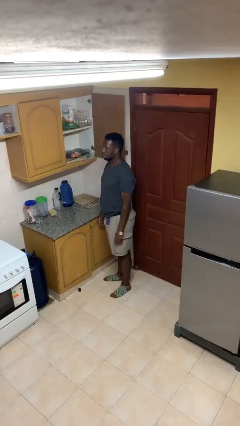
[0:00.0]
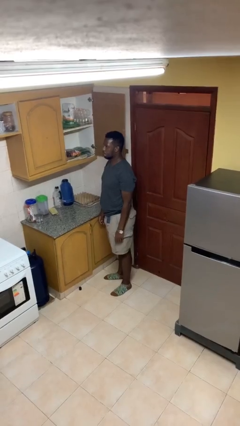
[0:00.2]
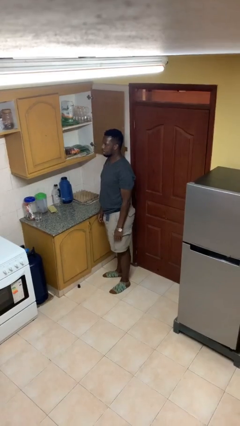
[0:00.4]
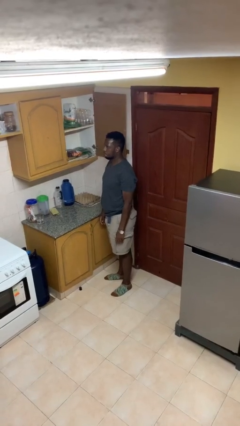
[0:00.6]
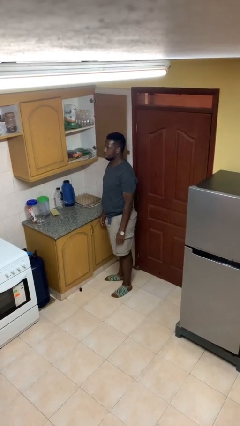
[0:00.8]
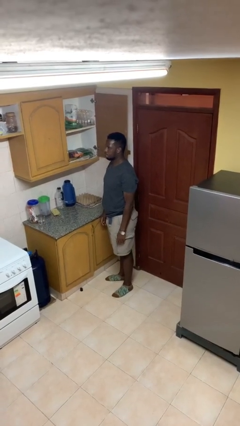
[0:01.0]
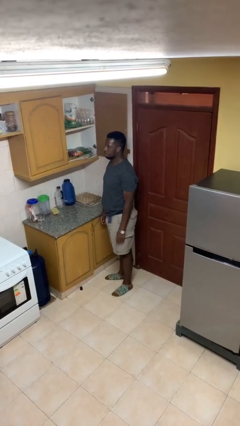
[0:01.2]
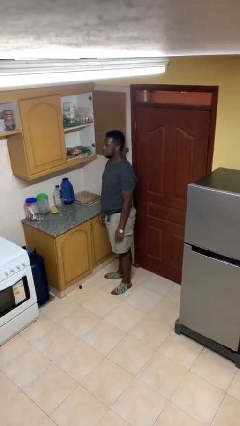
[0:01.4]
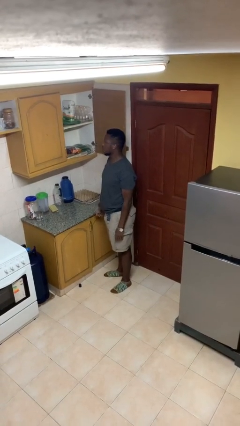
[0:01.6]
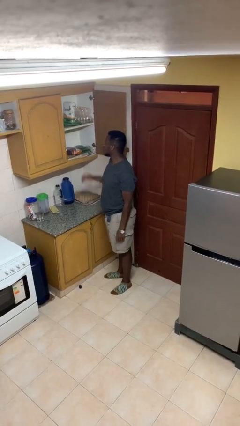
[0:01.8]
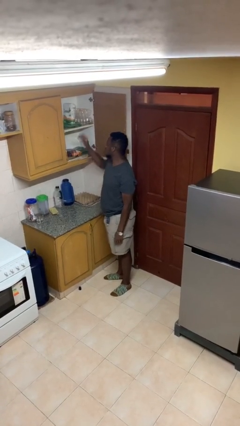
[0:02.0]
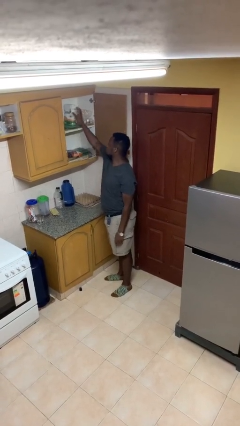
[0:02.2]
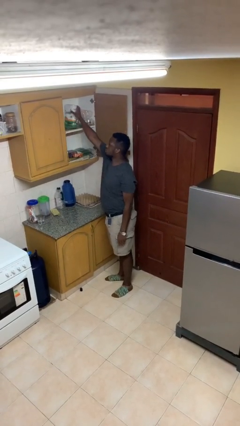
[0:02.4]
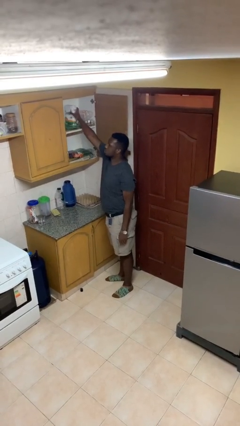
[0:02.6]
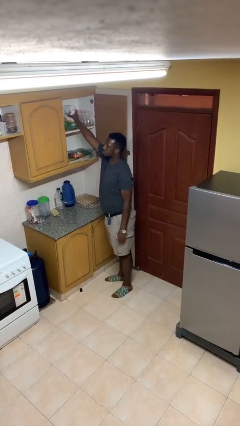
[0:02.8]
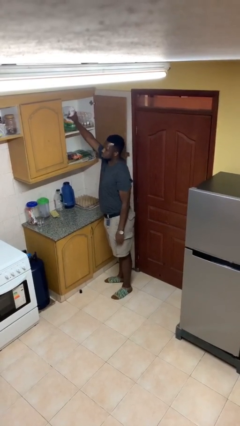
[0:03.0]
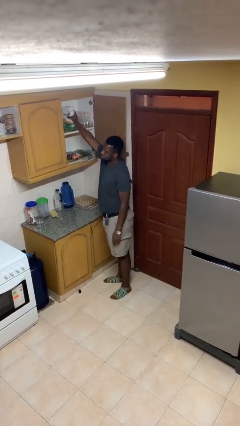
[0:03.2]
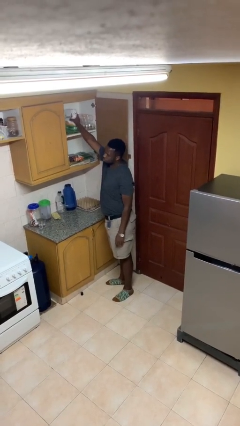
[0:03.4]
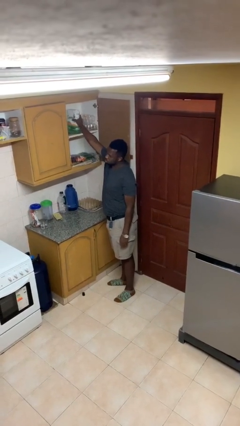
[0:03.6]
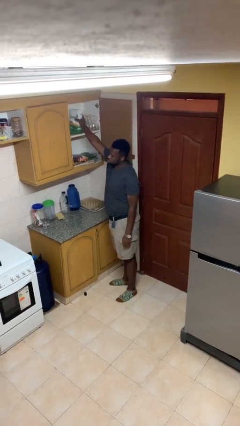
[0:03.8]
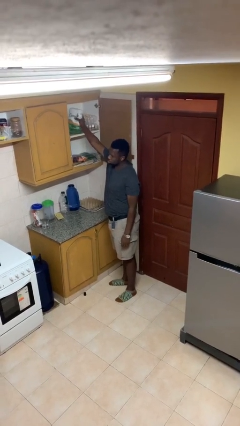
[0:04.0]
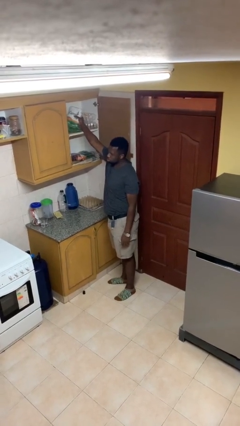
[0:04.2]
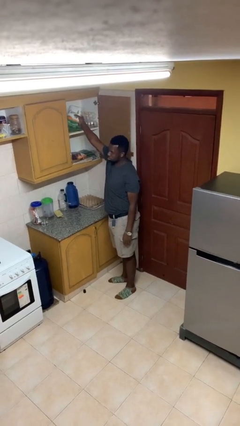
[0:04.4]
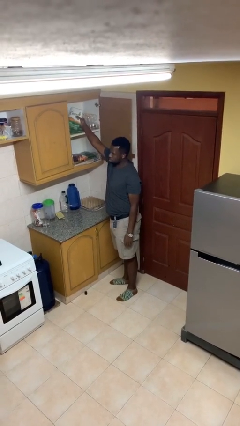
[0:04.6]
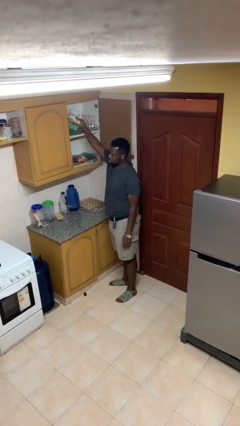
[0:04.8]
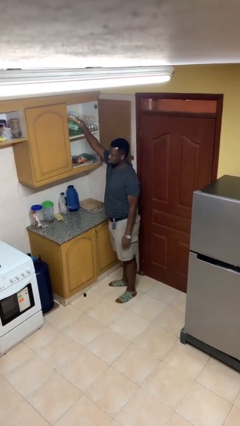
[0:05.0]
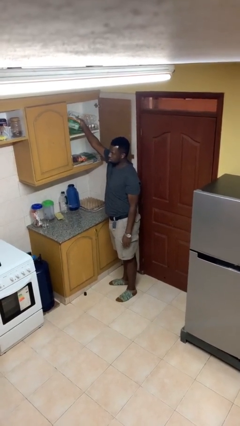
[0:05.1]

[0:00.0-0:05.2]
person picks up object from shelf

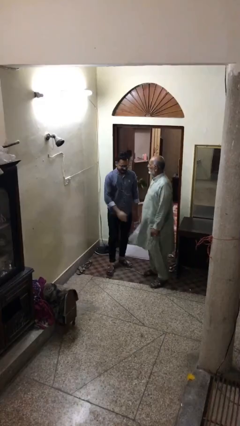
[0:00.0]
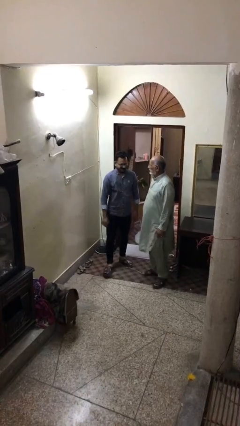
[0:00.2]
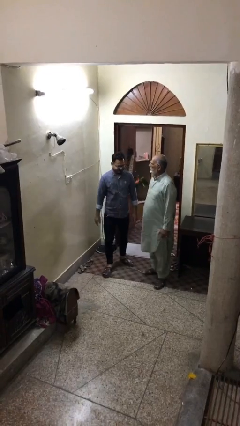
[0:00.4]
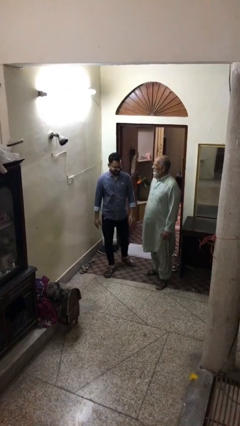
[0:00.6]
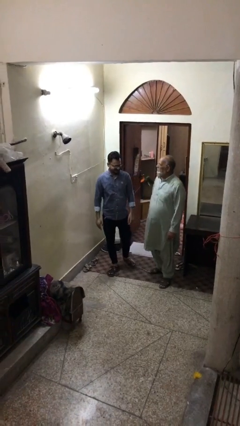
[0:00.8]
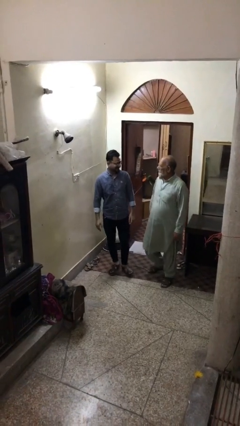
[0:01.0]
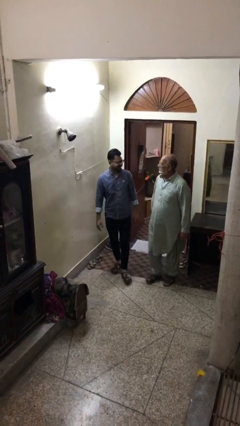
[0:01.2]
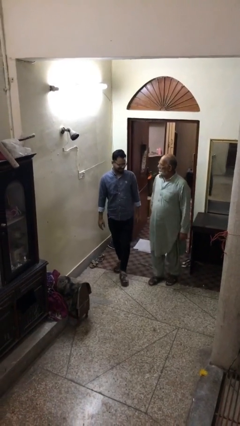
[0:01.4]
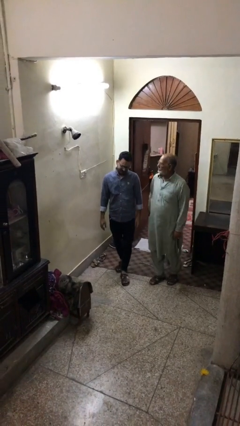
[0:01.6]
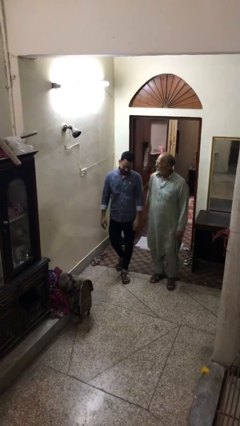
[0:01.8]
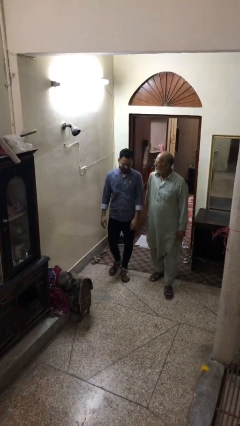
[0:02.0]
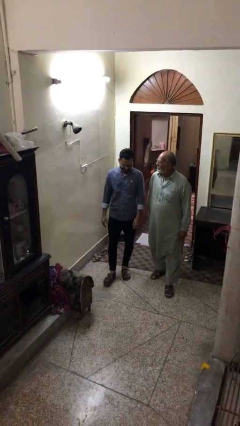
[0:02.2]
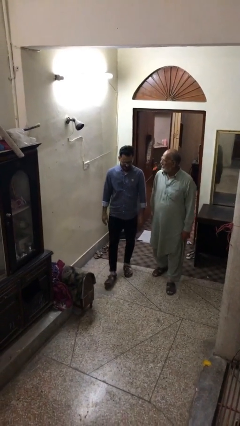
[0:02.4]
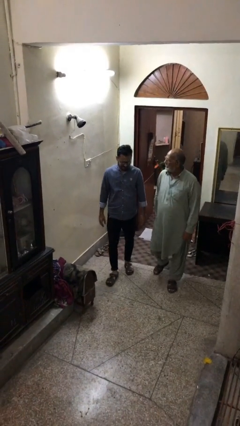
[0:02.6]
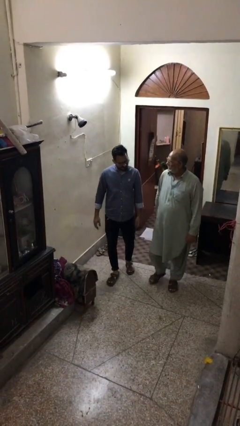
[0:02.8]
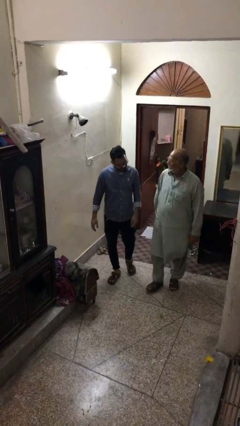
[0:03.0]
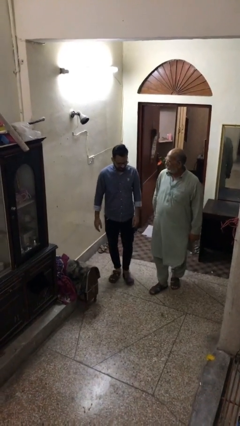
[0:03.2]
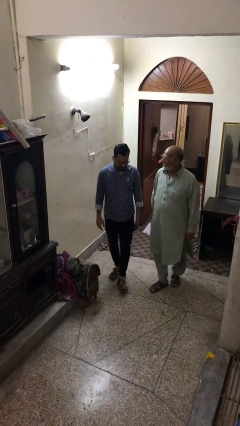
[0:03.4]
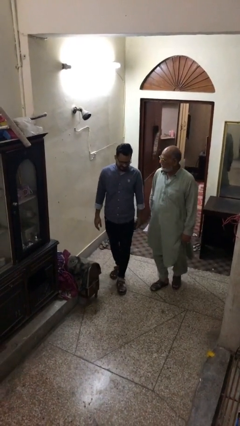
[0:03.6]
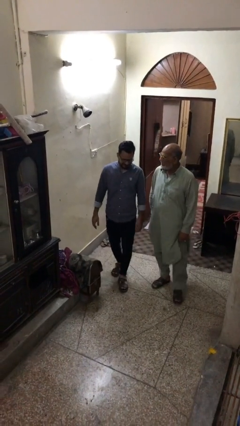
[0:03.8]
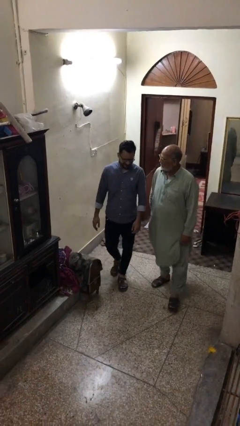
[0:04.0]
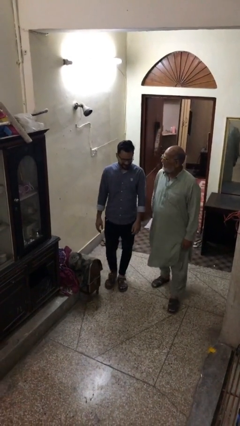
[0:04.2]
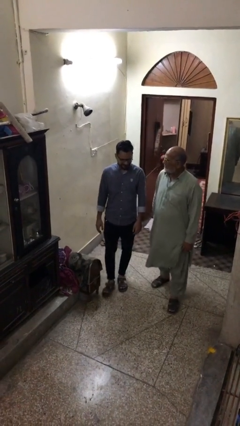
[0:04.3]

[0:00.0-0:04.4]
person talks to person

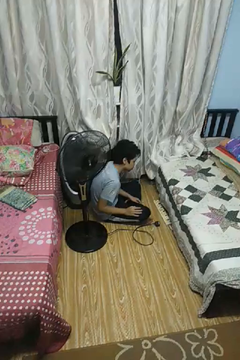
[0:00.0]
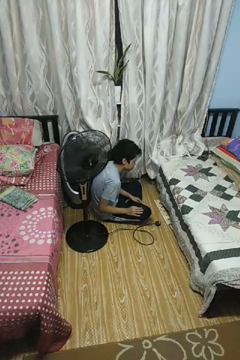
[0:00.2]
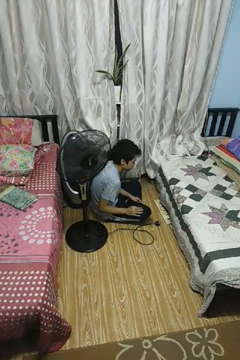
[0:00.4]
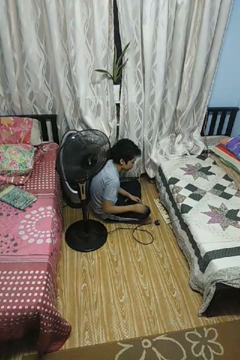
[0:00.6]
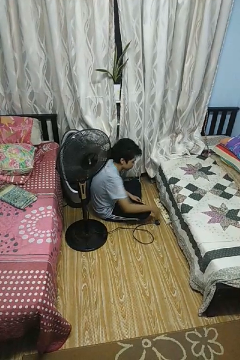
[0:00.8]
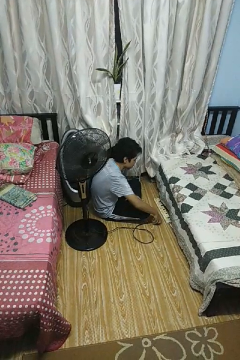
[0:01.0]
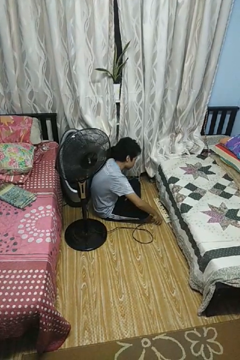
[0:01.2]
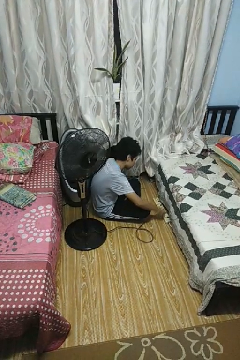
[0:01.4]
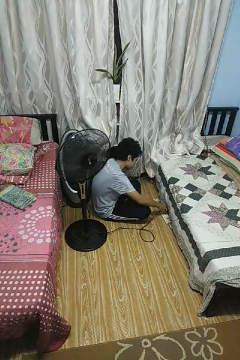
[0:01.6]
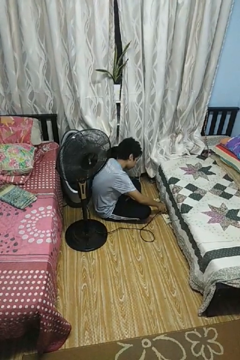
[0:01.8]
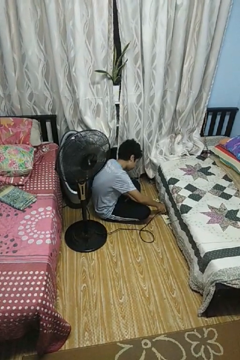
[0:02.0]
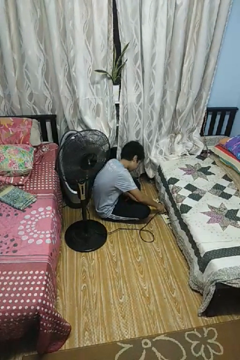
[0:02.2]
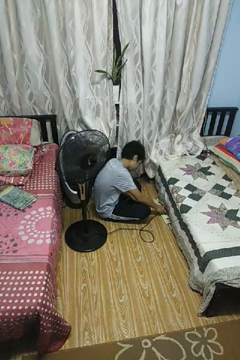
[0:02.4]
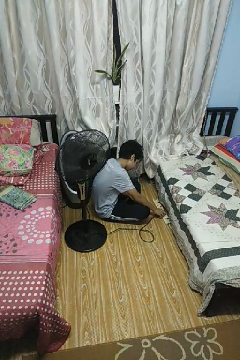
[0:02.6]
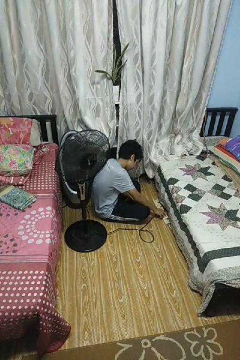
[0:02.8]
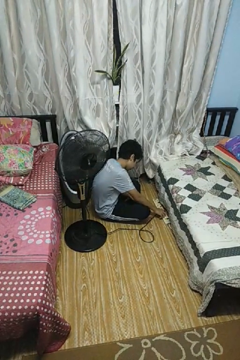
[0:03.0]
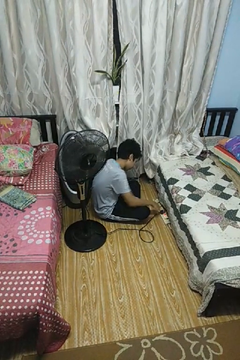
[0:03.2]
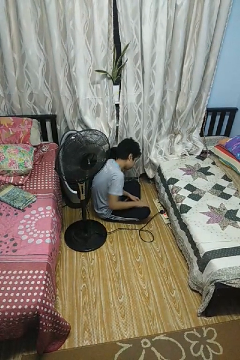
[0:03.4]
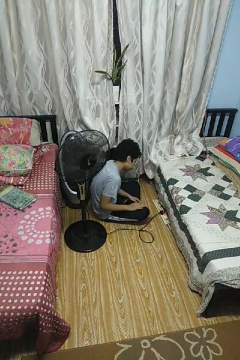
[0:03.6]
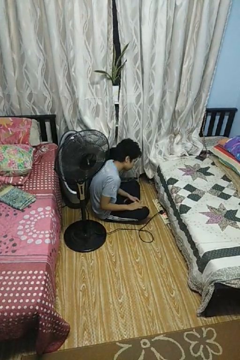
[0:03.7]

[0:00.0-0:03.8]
person plugs into electrical socket

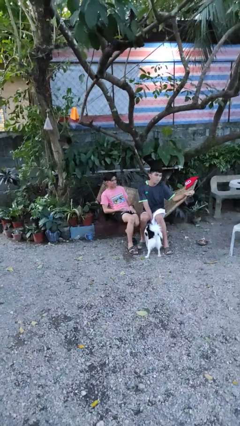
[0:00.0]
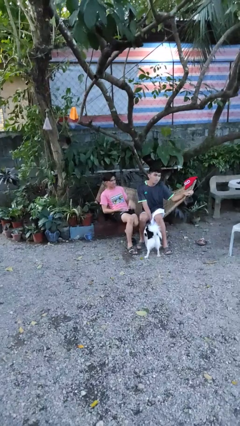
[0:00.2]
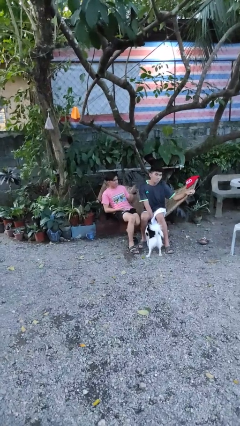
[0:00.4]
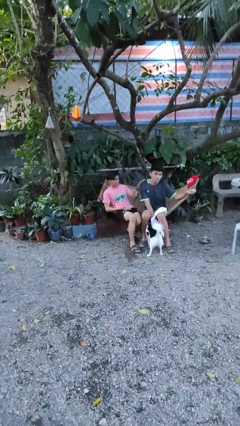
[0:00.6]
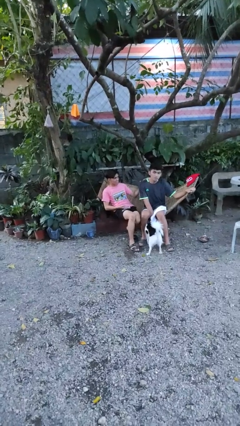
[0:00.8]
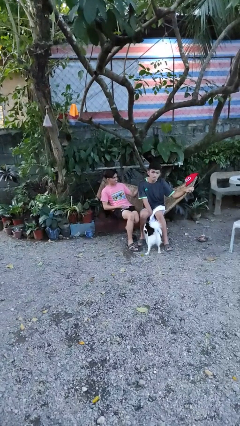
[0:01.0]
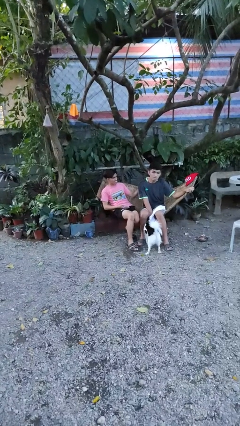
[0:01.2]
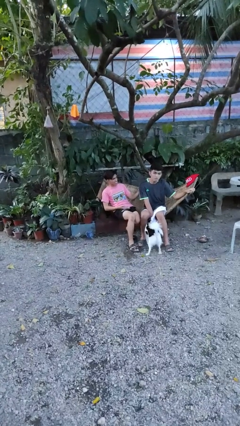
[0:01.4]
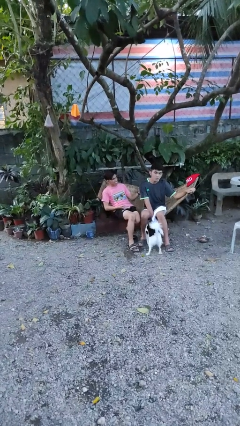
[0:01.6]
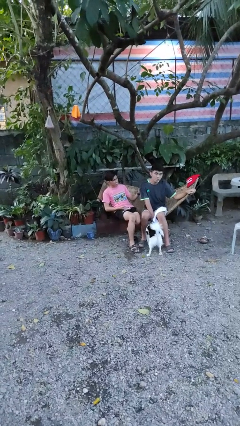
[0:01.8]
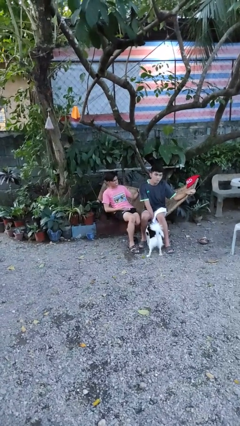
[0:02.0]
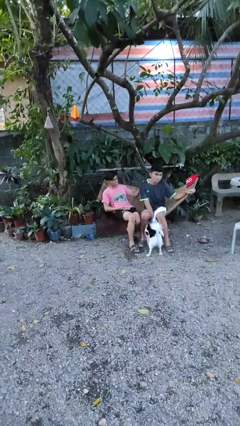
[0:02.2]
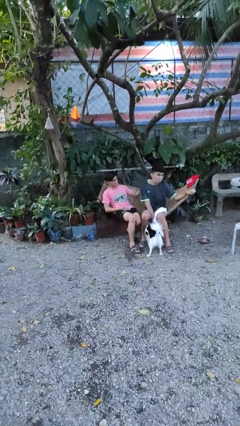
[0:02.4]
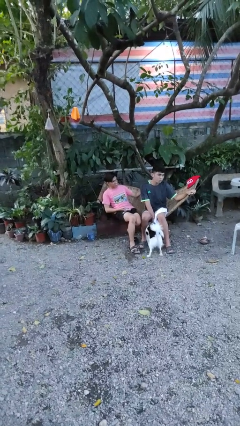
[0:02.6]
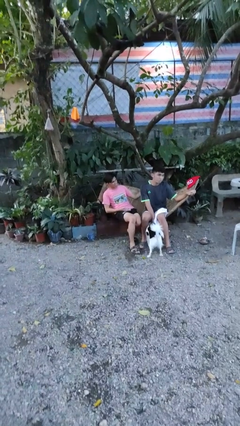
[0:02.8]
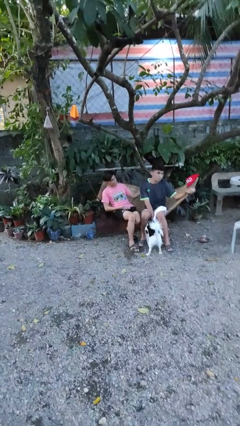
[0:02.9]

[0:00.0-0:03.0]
person touches back of person

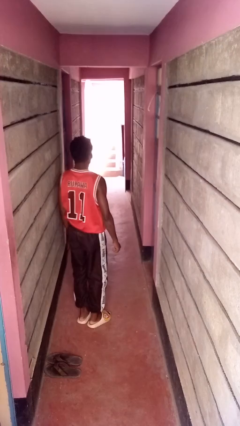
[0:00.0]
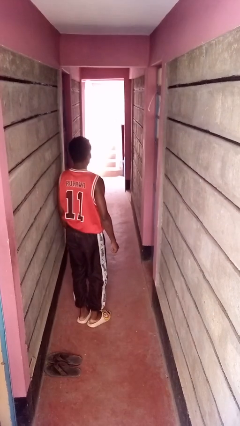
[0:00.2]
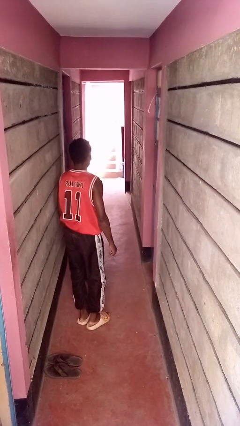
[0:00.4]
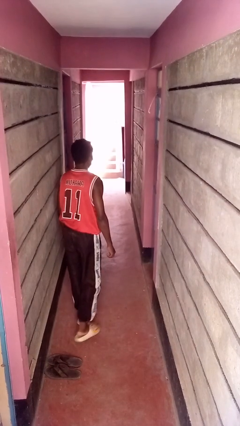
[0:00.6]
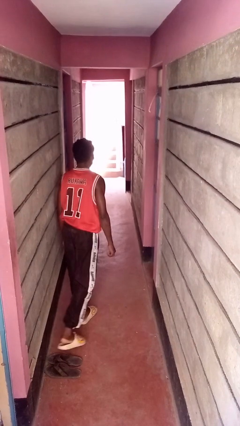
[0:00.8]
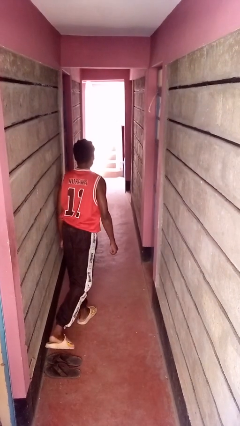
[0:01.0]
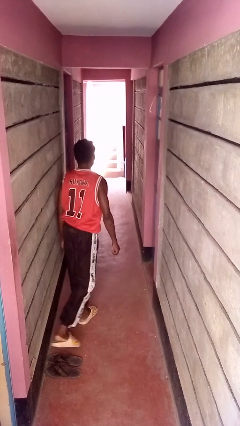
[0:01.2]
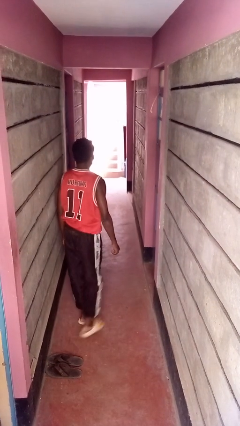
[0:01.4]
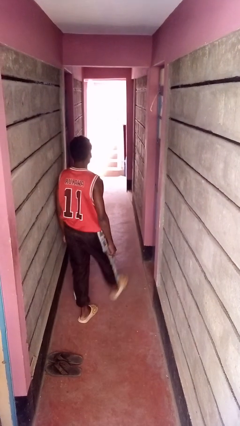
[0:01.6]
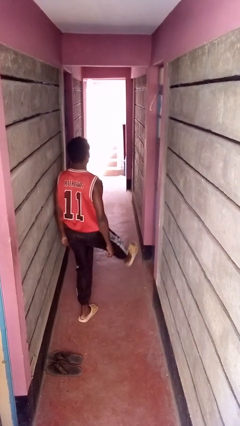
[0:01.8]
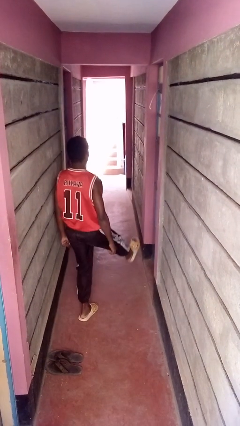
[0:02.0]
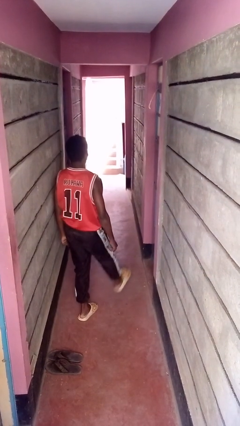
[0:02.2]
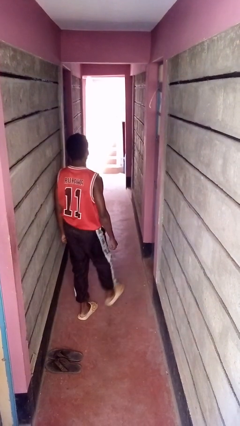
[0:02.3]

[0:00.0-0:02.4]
person wiggles hips
